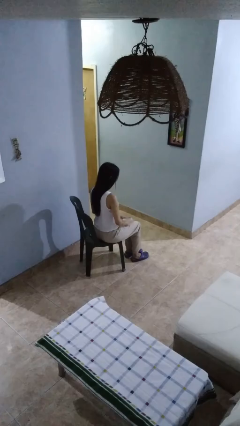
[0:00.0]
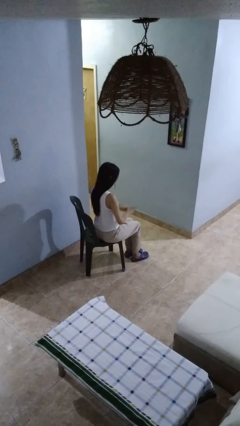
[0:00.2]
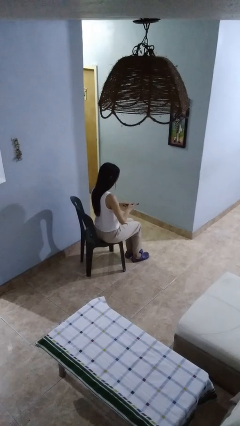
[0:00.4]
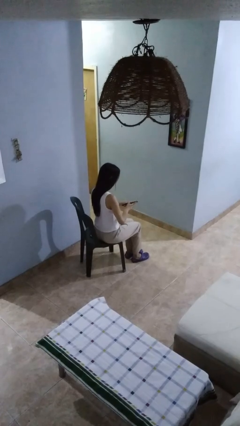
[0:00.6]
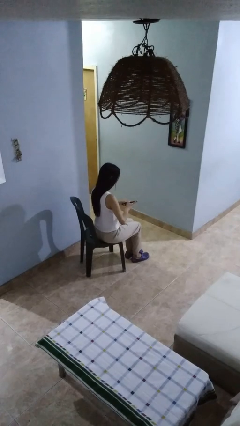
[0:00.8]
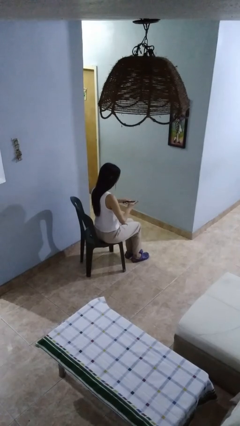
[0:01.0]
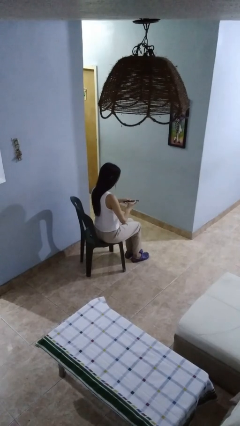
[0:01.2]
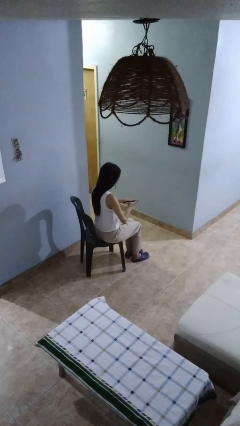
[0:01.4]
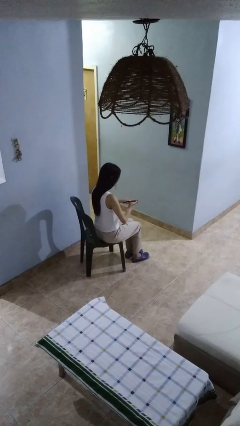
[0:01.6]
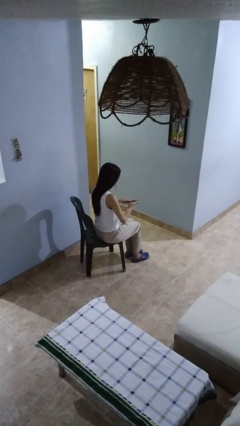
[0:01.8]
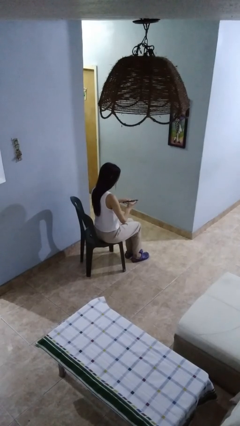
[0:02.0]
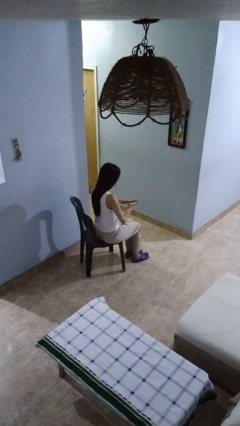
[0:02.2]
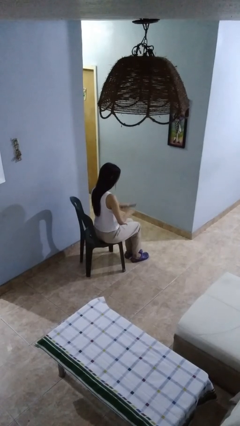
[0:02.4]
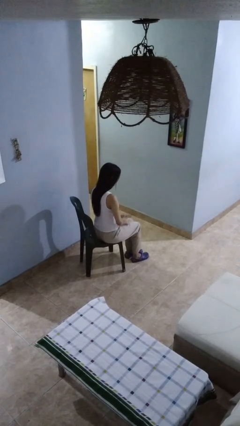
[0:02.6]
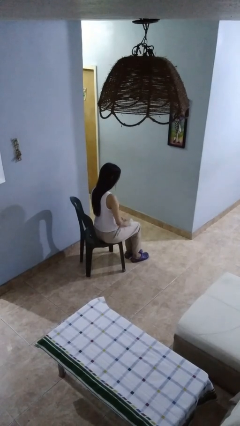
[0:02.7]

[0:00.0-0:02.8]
person files fingernails

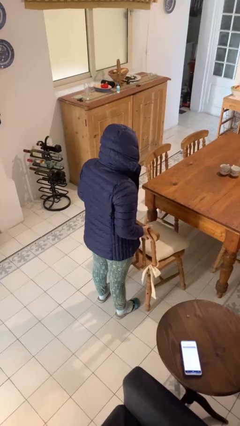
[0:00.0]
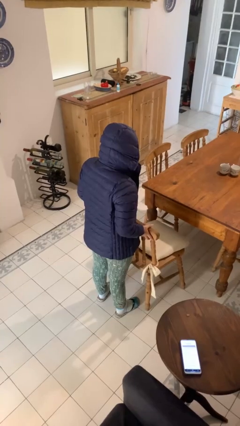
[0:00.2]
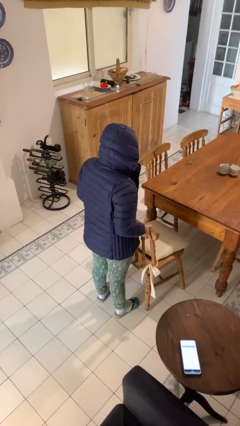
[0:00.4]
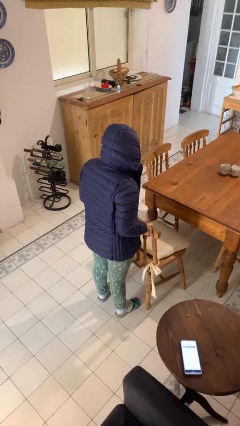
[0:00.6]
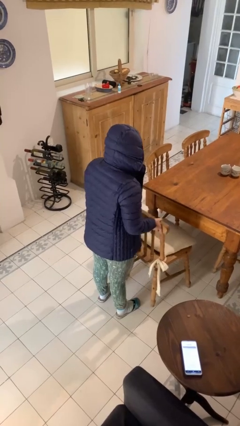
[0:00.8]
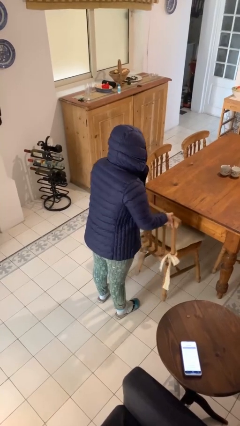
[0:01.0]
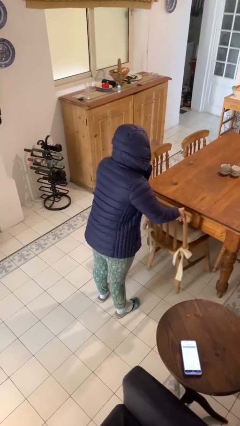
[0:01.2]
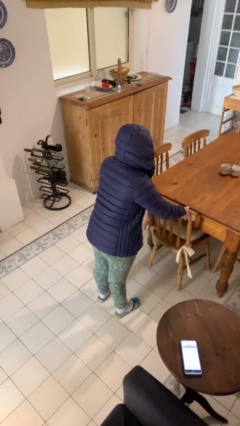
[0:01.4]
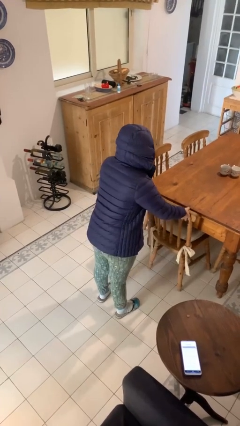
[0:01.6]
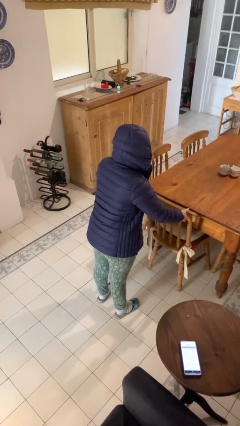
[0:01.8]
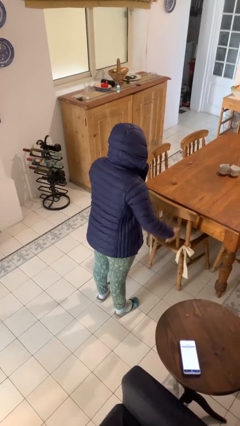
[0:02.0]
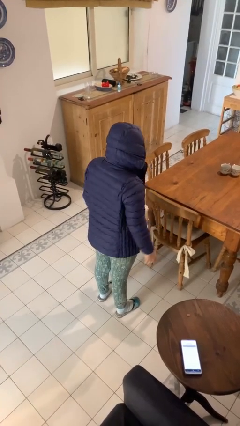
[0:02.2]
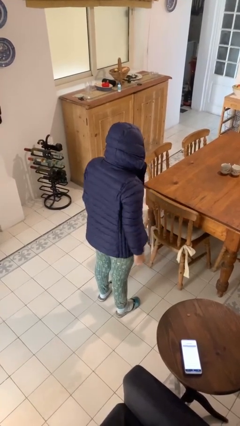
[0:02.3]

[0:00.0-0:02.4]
person pushes in chair

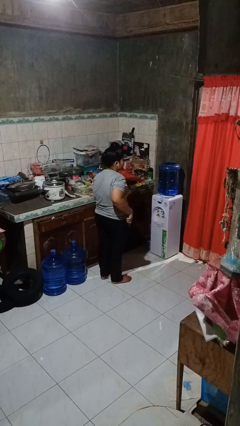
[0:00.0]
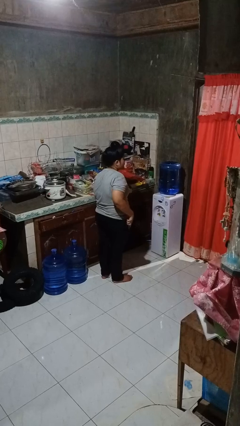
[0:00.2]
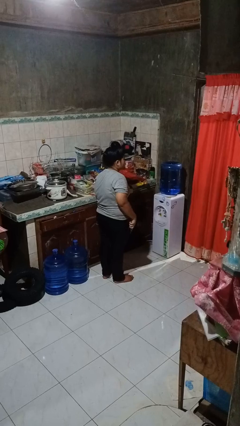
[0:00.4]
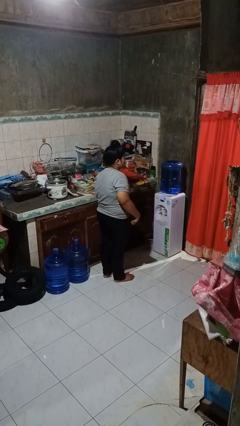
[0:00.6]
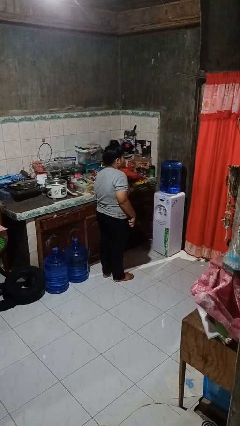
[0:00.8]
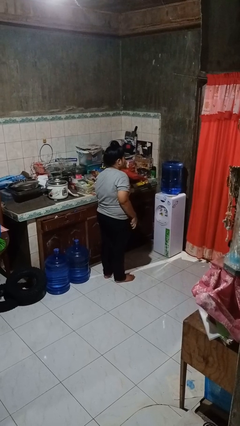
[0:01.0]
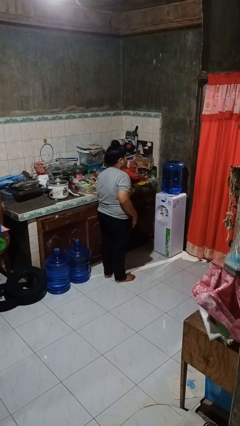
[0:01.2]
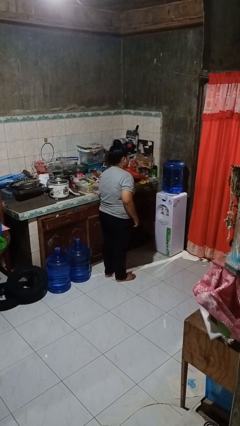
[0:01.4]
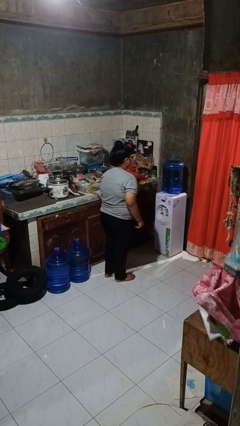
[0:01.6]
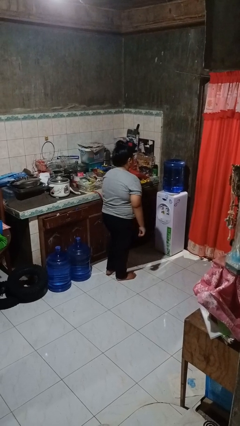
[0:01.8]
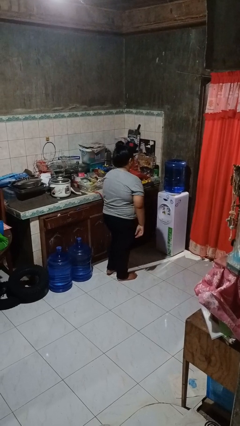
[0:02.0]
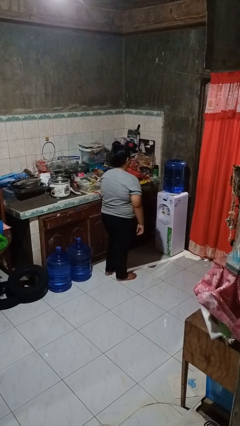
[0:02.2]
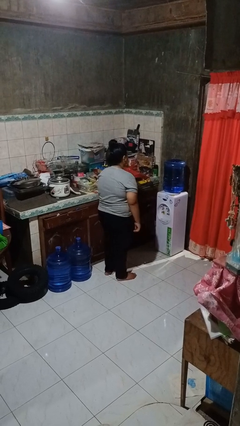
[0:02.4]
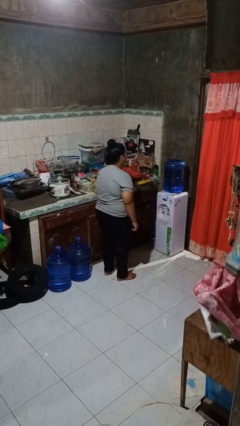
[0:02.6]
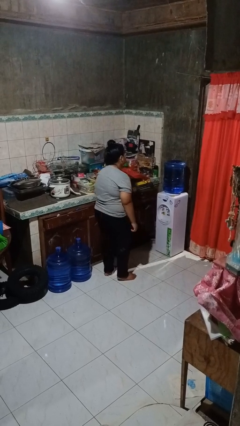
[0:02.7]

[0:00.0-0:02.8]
person puts phone into pocket

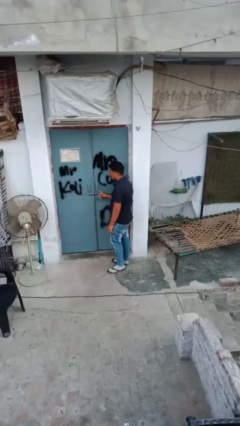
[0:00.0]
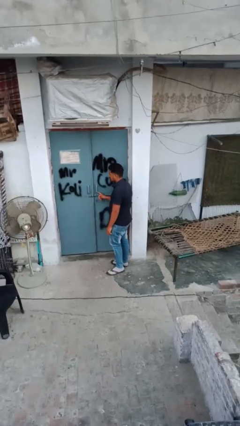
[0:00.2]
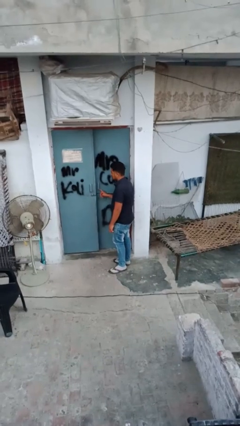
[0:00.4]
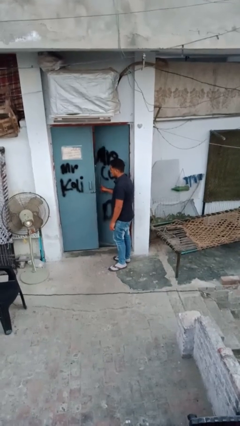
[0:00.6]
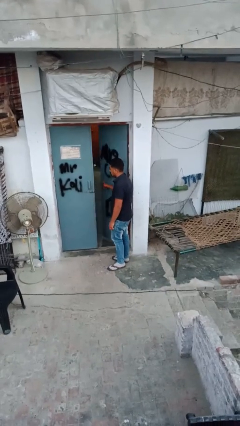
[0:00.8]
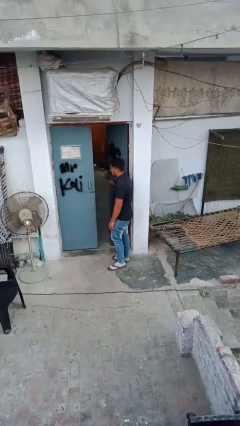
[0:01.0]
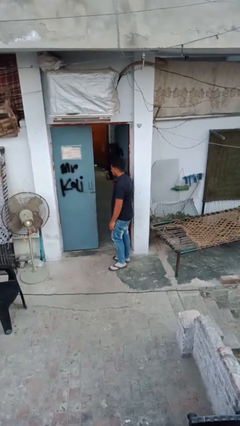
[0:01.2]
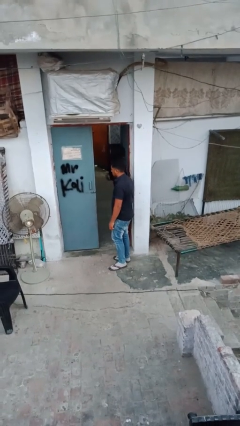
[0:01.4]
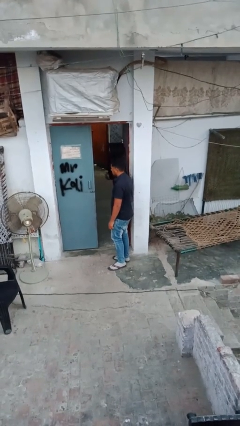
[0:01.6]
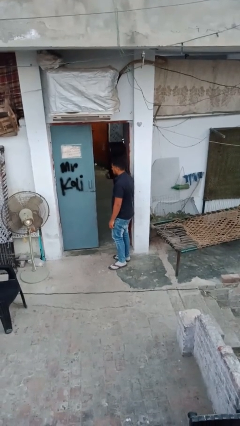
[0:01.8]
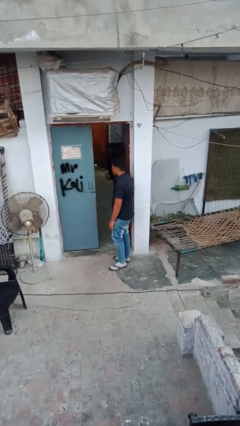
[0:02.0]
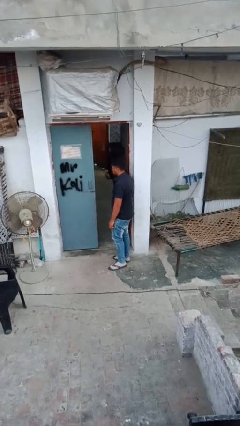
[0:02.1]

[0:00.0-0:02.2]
person opens facility door

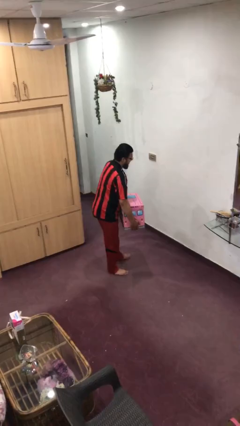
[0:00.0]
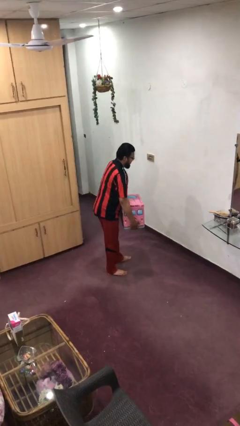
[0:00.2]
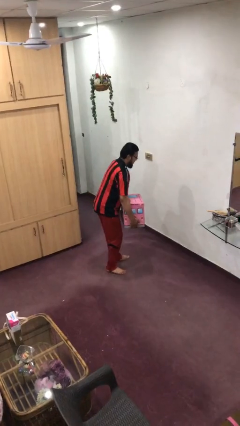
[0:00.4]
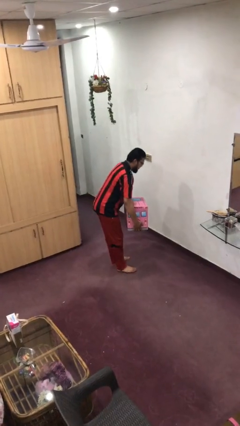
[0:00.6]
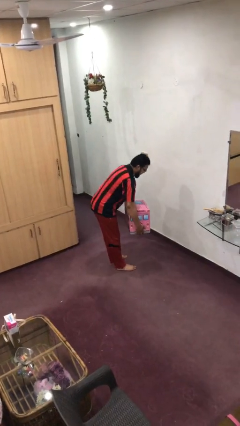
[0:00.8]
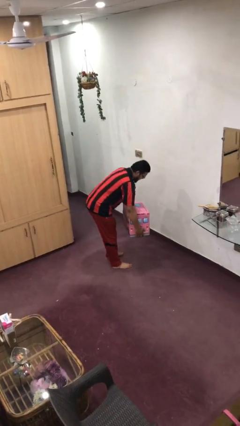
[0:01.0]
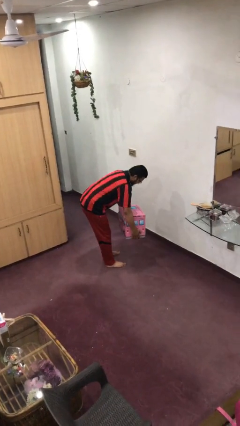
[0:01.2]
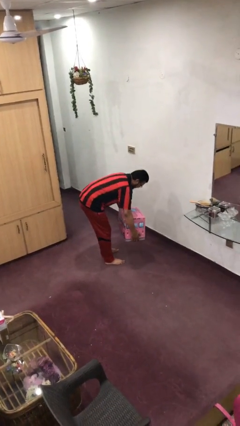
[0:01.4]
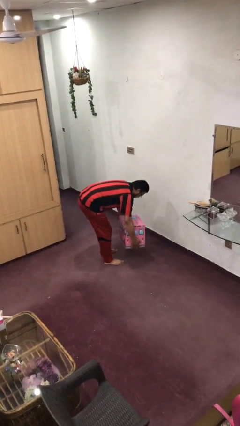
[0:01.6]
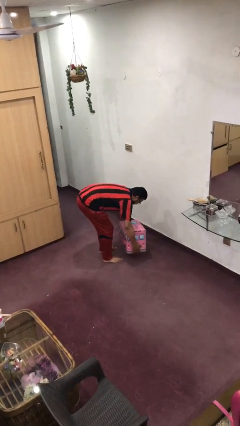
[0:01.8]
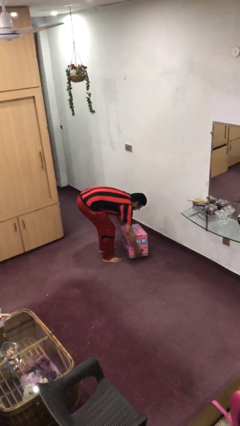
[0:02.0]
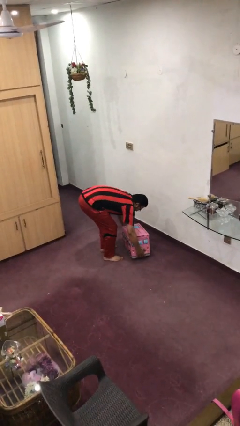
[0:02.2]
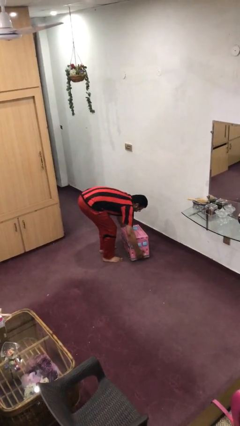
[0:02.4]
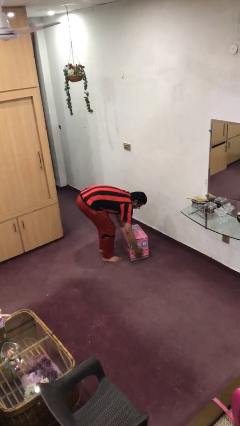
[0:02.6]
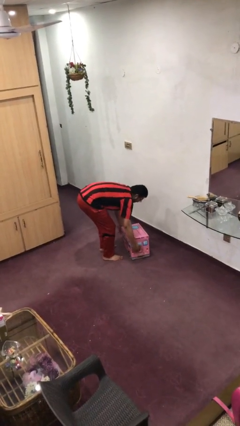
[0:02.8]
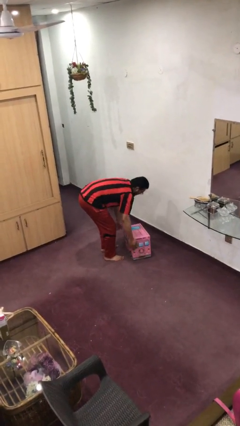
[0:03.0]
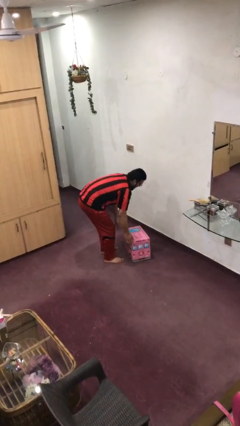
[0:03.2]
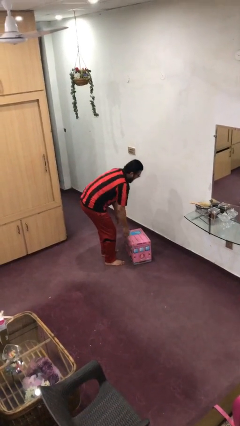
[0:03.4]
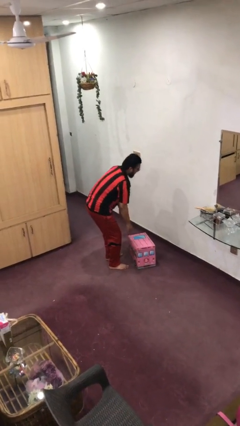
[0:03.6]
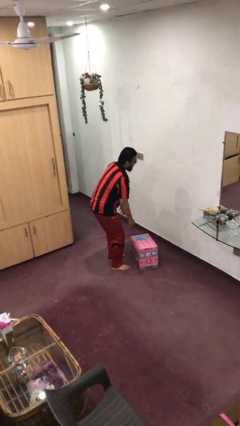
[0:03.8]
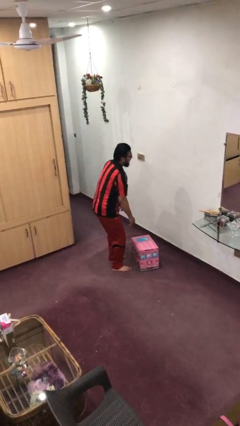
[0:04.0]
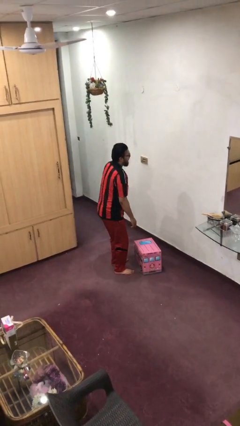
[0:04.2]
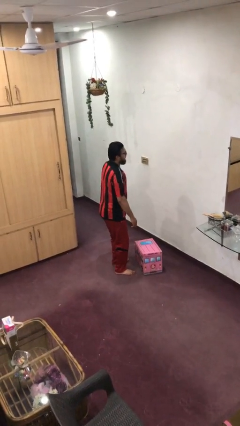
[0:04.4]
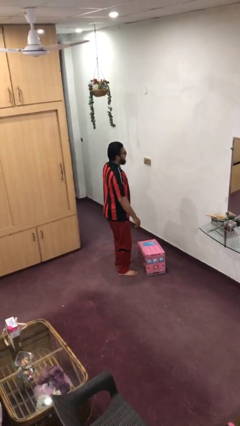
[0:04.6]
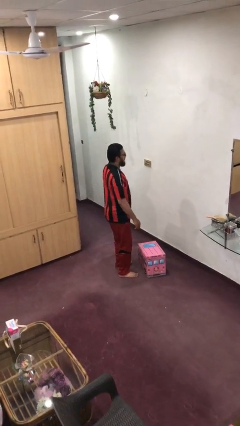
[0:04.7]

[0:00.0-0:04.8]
person puts down object on floor

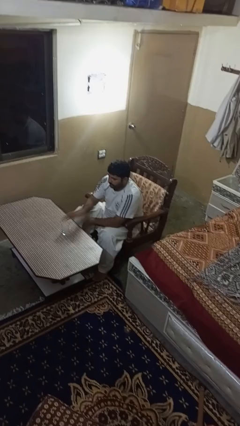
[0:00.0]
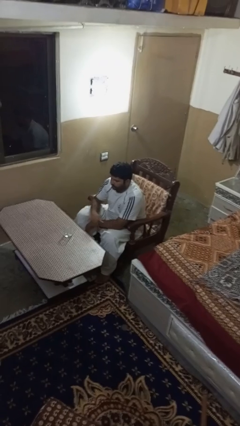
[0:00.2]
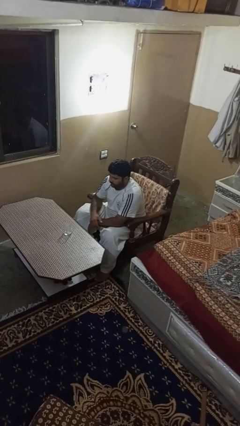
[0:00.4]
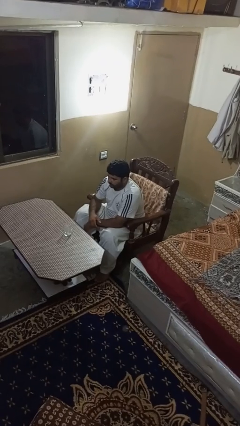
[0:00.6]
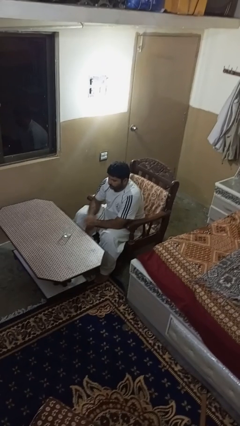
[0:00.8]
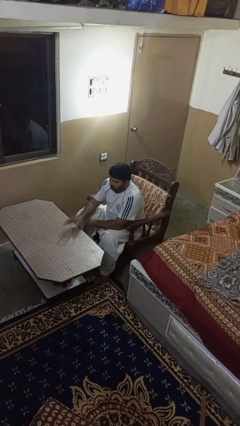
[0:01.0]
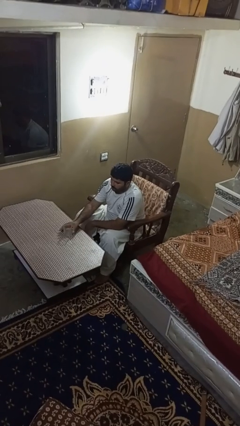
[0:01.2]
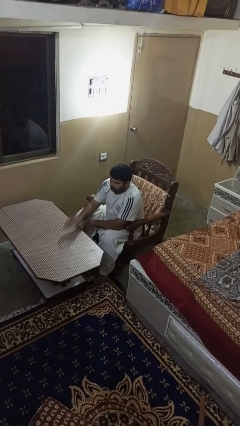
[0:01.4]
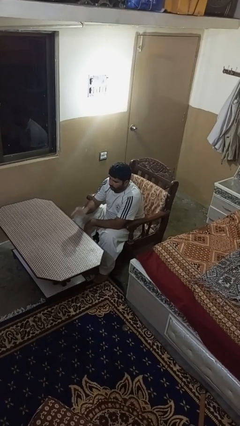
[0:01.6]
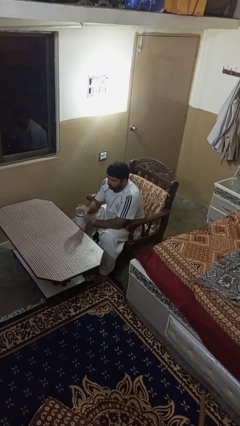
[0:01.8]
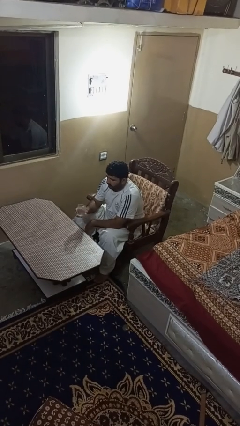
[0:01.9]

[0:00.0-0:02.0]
person picks up object from table

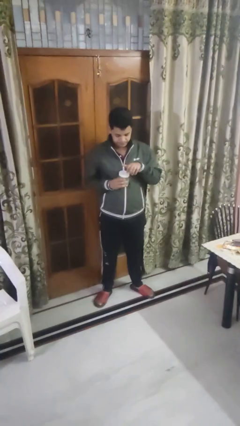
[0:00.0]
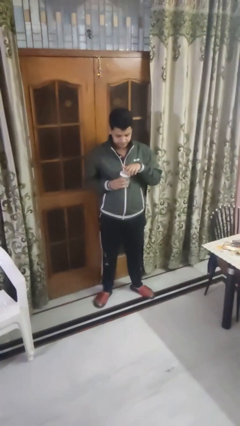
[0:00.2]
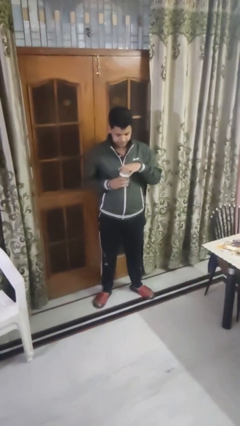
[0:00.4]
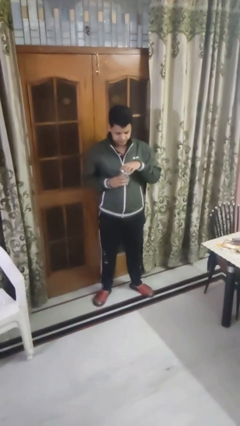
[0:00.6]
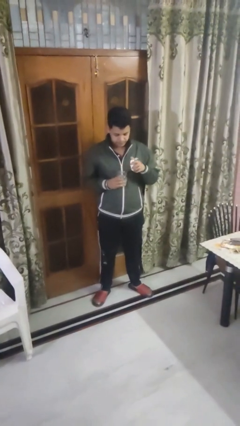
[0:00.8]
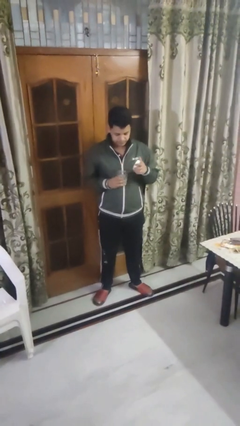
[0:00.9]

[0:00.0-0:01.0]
person opens jar
